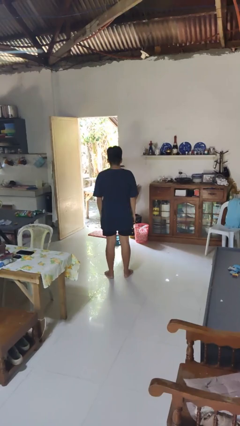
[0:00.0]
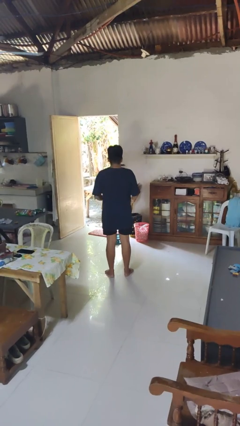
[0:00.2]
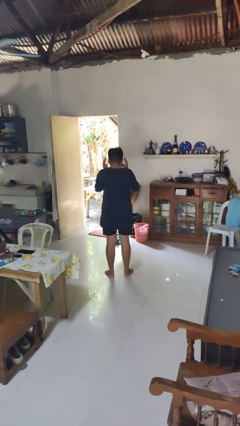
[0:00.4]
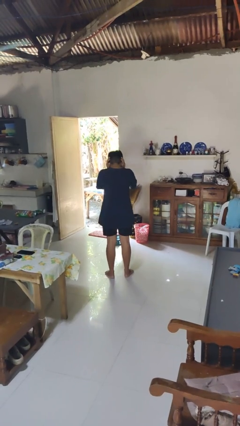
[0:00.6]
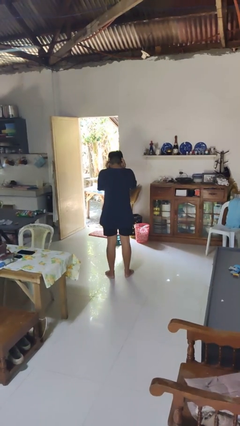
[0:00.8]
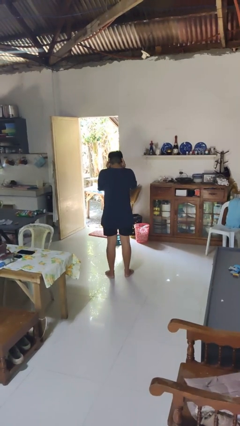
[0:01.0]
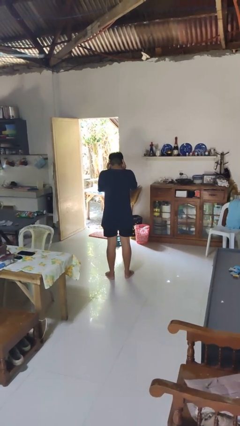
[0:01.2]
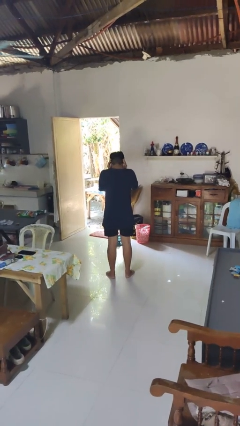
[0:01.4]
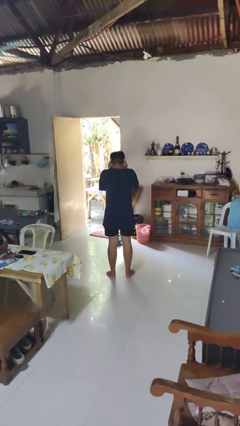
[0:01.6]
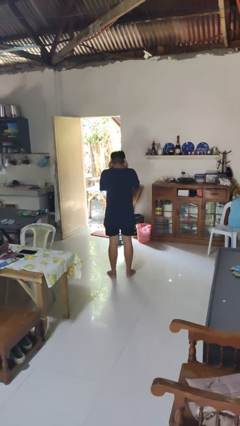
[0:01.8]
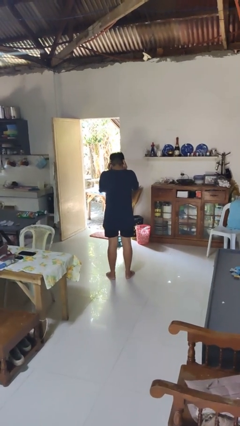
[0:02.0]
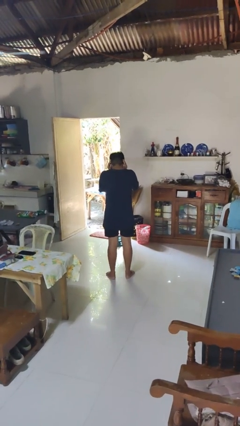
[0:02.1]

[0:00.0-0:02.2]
person puts fingers in ear

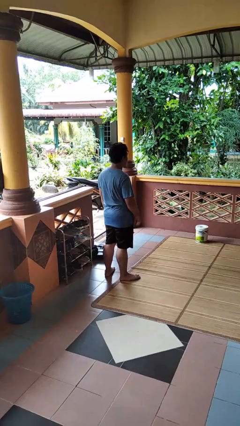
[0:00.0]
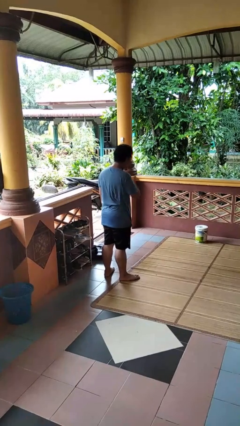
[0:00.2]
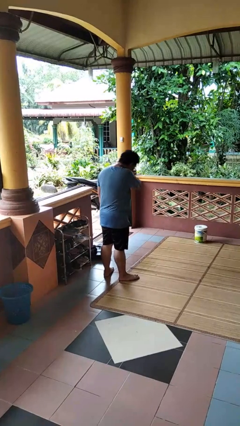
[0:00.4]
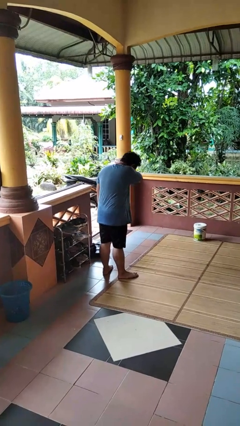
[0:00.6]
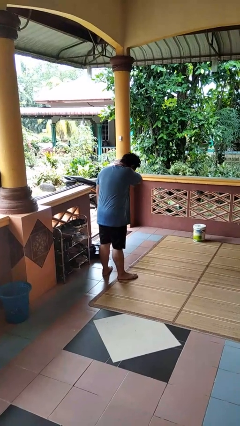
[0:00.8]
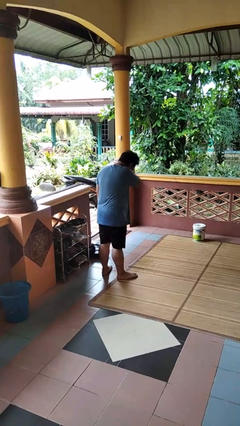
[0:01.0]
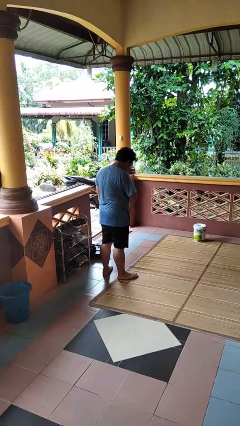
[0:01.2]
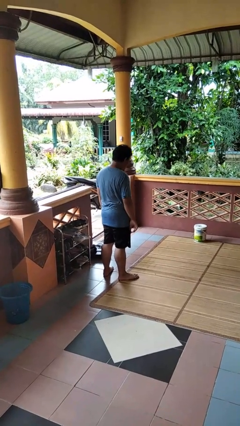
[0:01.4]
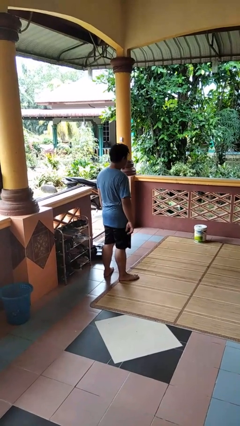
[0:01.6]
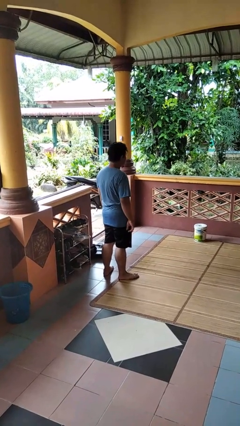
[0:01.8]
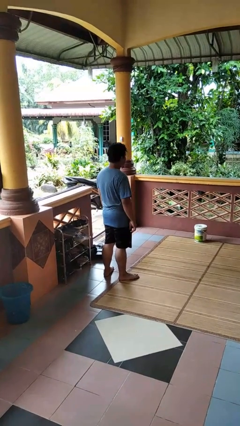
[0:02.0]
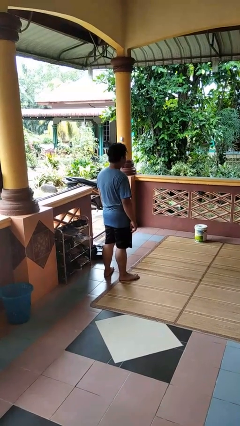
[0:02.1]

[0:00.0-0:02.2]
person sneezes into hand

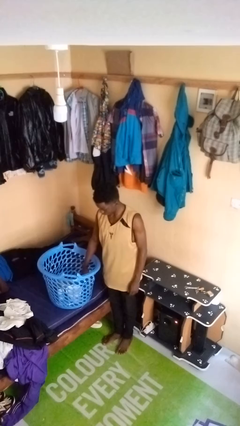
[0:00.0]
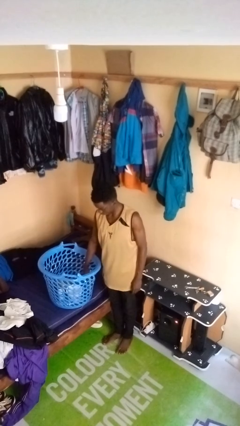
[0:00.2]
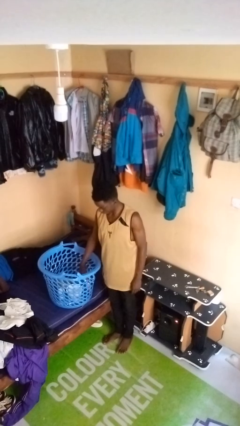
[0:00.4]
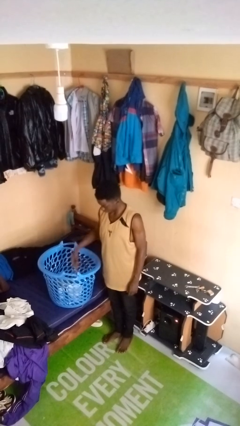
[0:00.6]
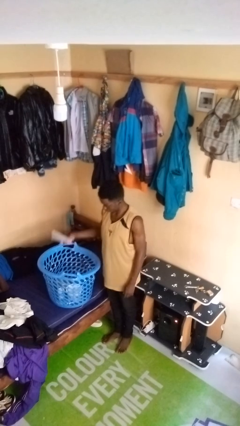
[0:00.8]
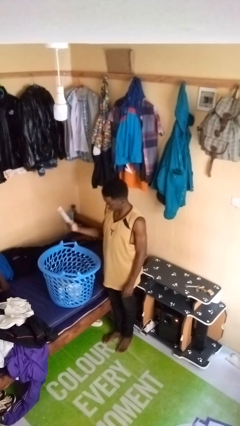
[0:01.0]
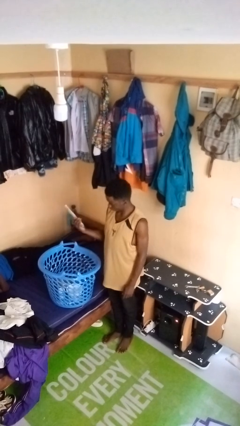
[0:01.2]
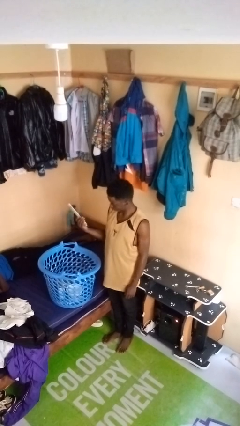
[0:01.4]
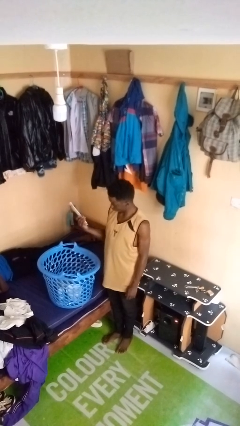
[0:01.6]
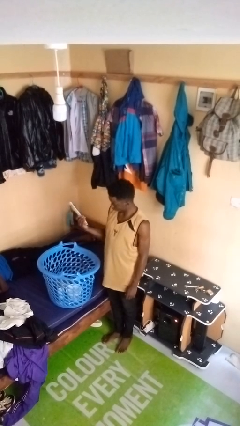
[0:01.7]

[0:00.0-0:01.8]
person takes object from basket

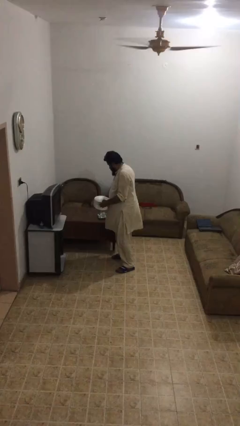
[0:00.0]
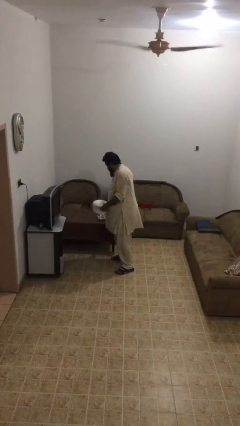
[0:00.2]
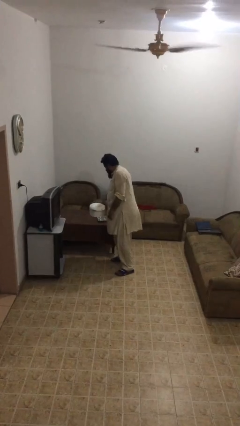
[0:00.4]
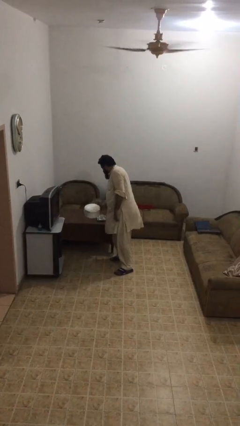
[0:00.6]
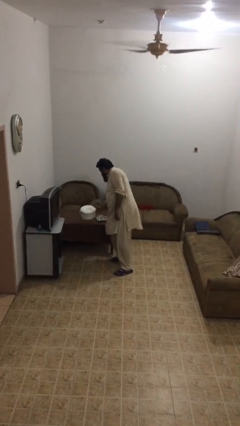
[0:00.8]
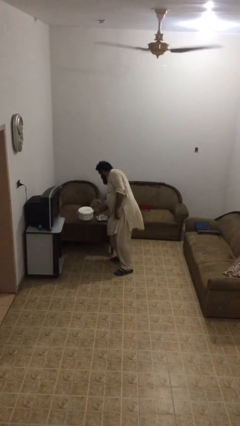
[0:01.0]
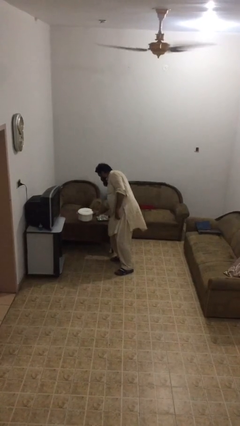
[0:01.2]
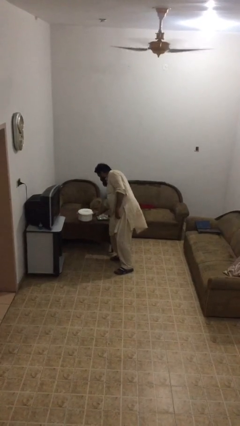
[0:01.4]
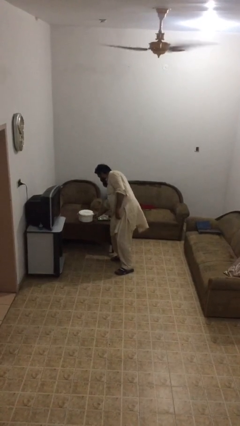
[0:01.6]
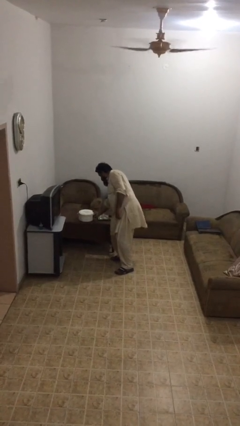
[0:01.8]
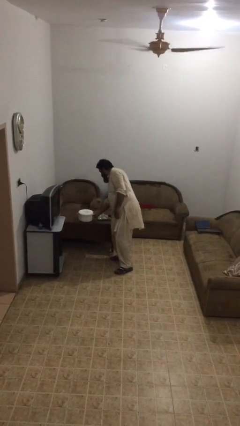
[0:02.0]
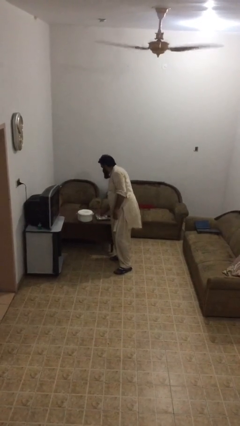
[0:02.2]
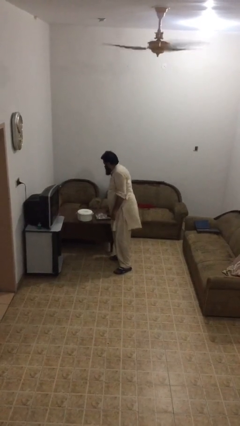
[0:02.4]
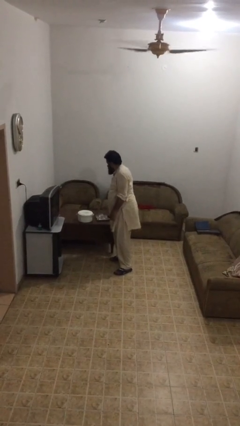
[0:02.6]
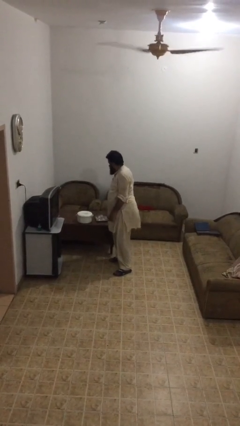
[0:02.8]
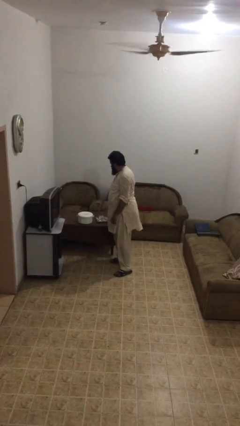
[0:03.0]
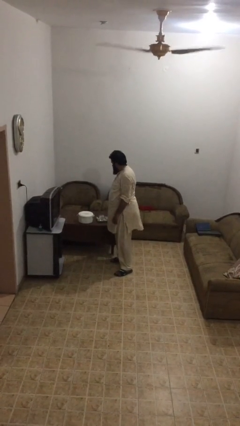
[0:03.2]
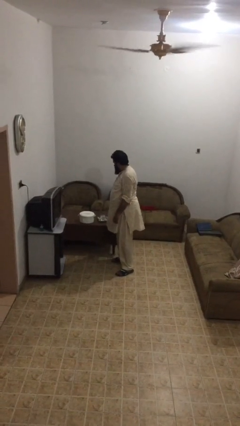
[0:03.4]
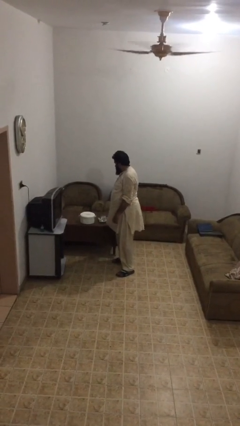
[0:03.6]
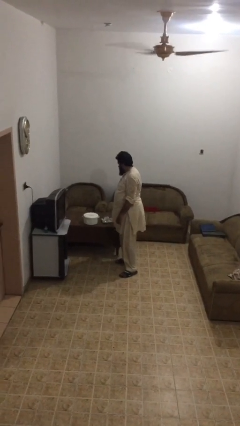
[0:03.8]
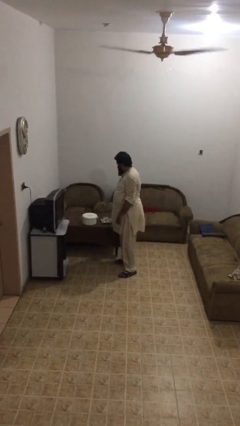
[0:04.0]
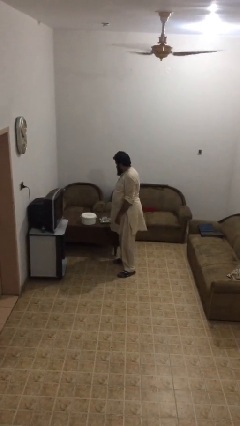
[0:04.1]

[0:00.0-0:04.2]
person puts down object on table

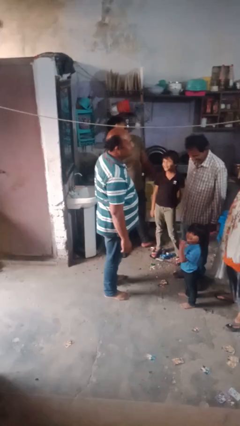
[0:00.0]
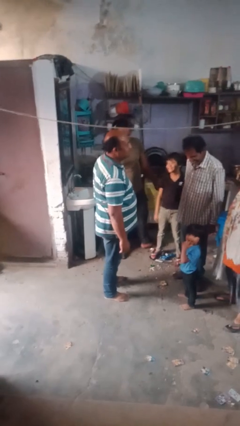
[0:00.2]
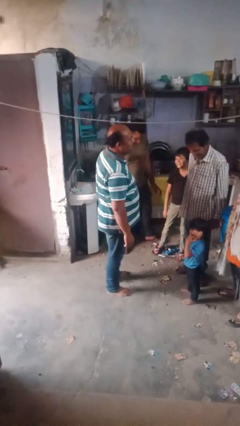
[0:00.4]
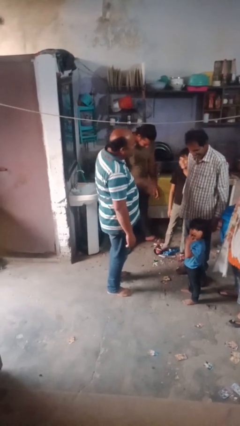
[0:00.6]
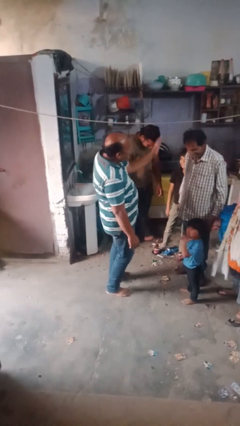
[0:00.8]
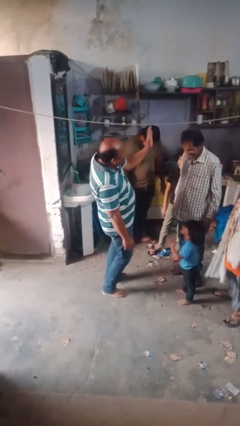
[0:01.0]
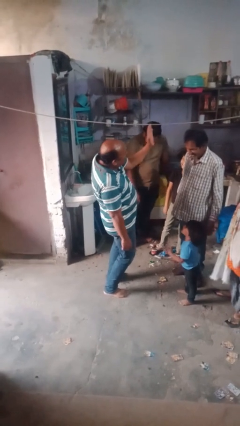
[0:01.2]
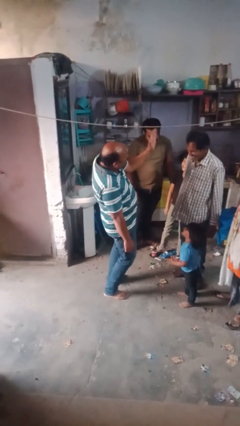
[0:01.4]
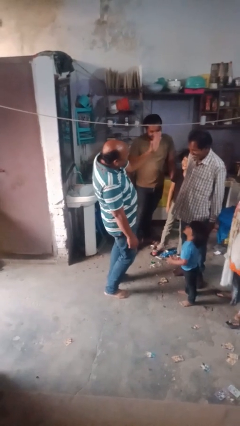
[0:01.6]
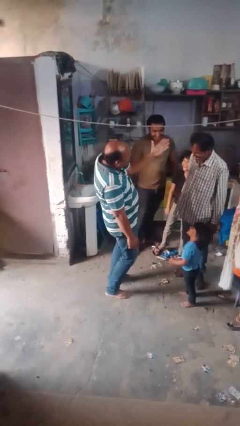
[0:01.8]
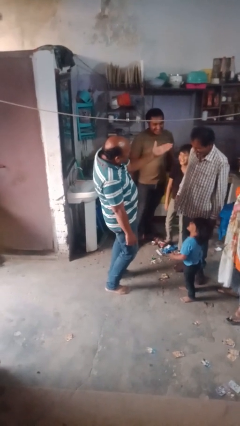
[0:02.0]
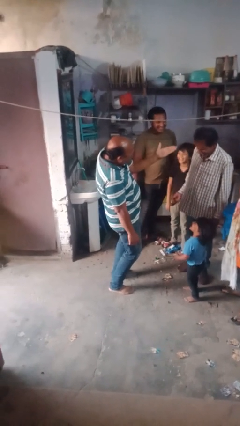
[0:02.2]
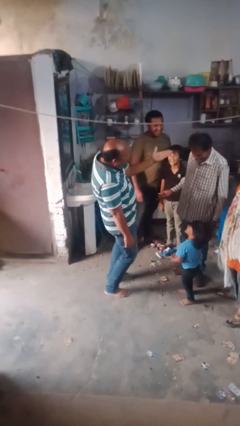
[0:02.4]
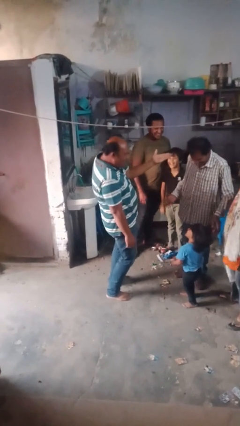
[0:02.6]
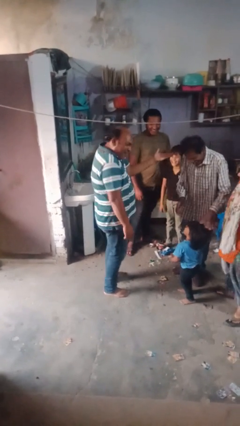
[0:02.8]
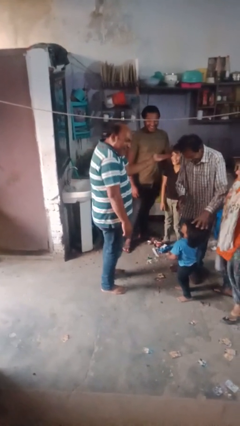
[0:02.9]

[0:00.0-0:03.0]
person laughs with person

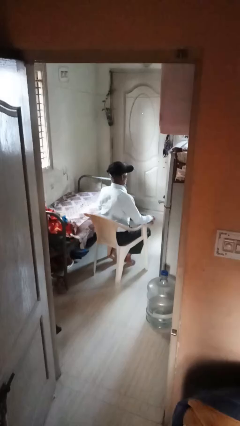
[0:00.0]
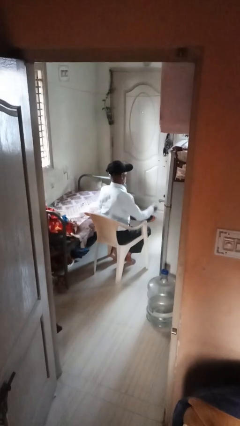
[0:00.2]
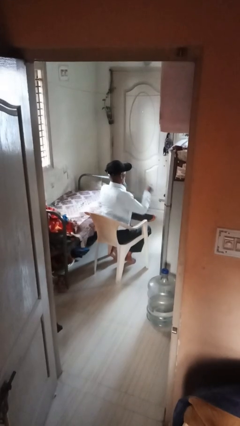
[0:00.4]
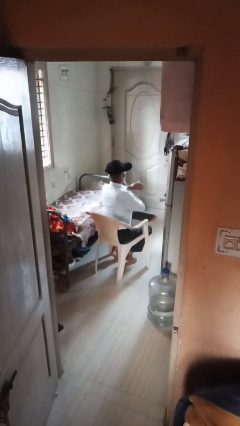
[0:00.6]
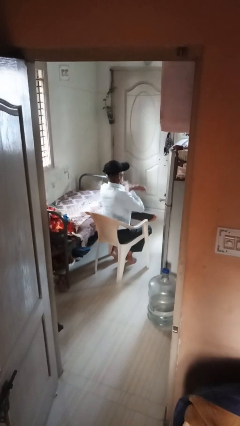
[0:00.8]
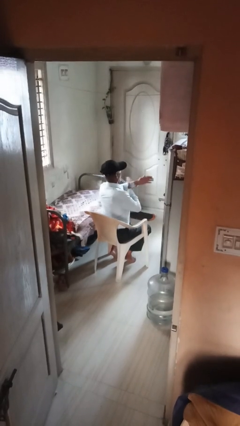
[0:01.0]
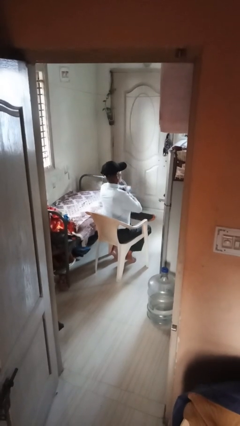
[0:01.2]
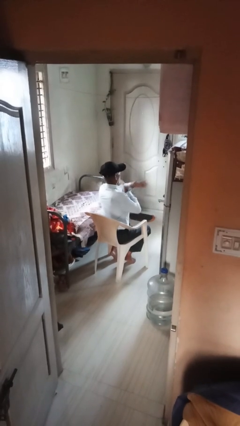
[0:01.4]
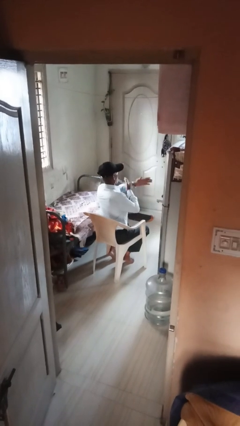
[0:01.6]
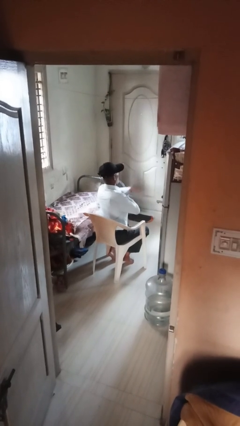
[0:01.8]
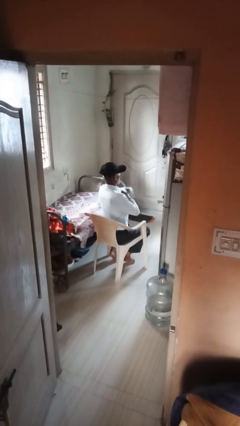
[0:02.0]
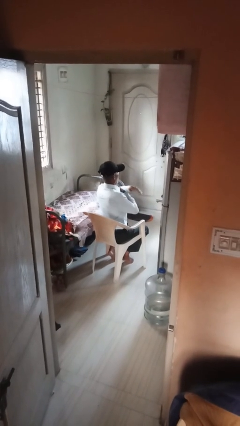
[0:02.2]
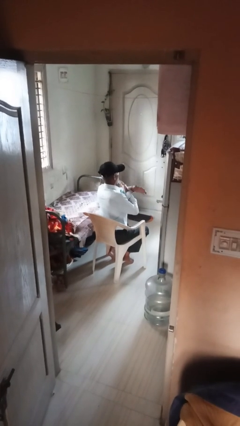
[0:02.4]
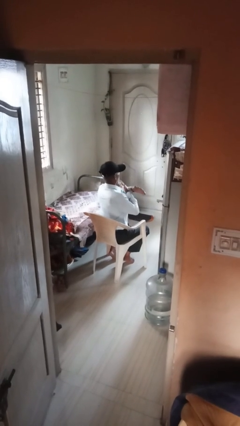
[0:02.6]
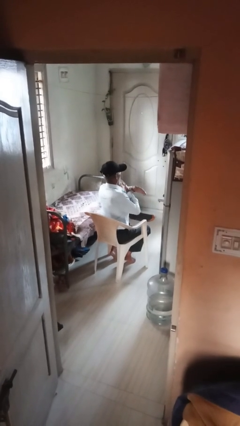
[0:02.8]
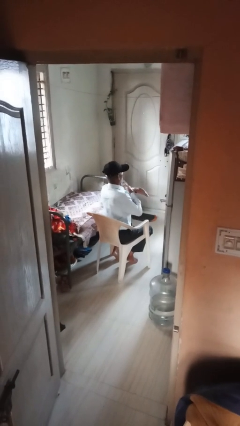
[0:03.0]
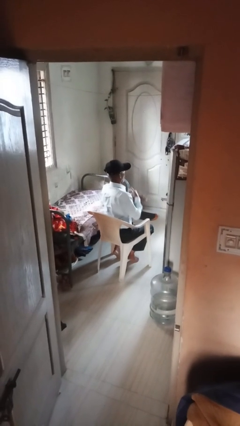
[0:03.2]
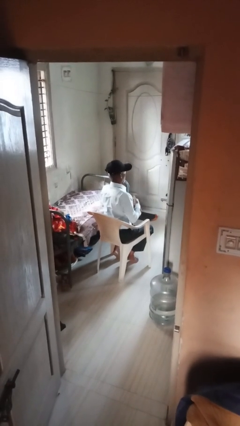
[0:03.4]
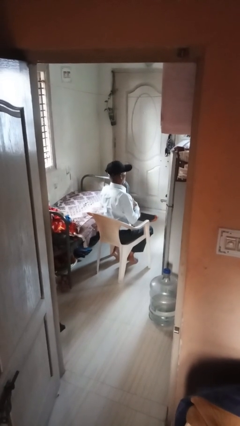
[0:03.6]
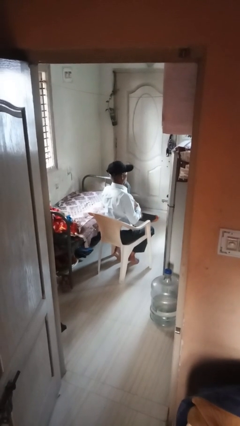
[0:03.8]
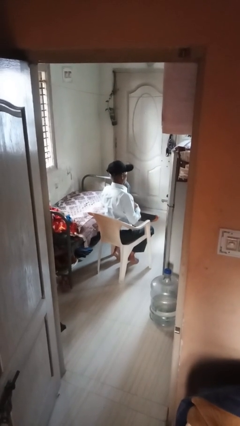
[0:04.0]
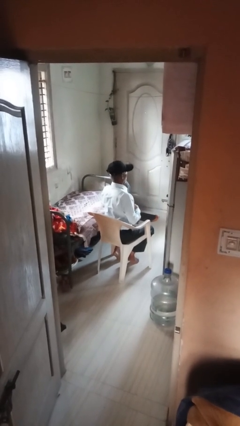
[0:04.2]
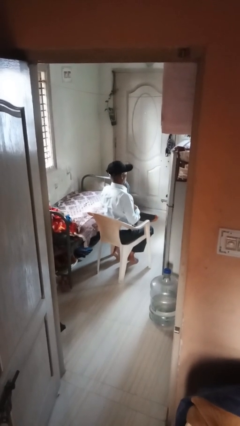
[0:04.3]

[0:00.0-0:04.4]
person drums on chest
